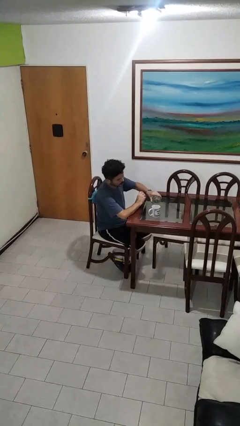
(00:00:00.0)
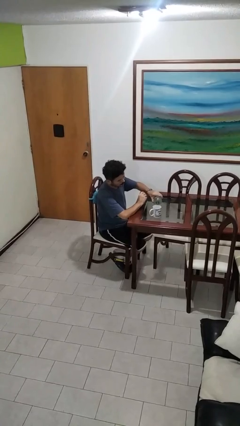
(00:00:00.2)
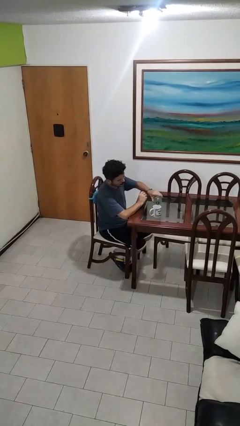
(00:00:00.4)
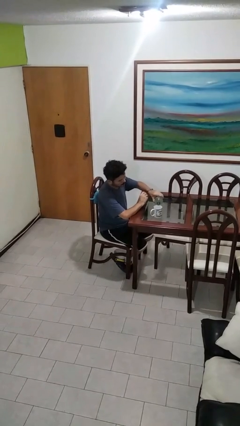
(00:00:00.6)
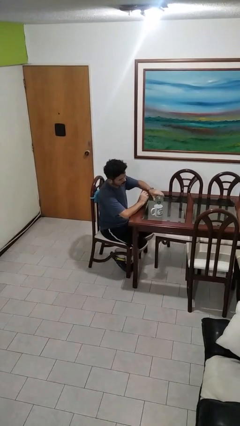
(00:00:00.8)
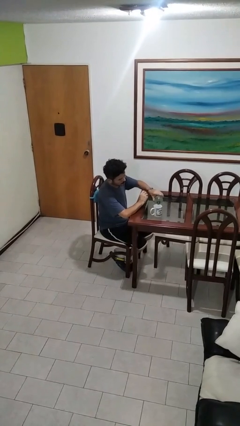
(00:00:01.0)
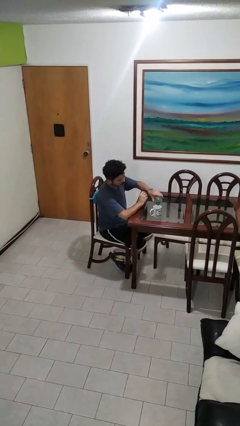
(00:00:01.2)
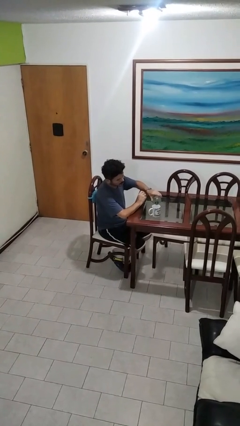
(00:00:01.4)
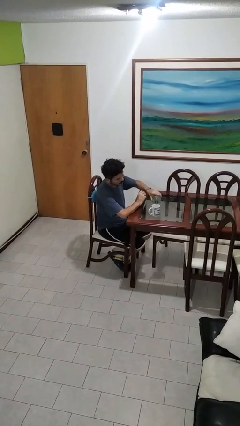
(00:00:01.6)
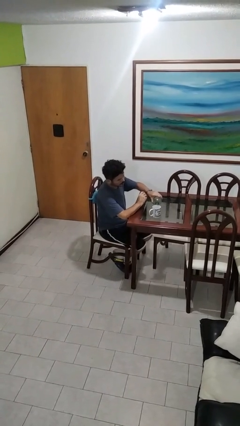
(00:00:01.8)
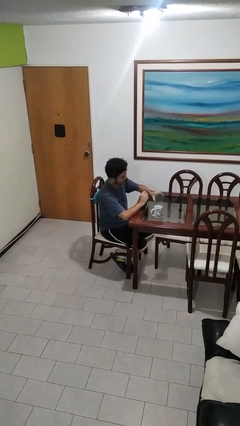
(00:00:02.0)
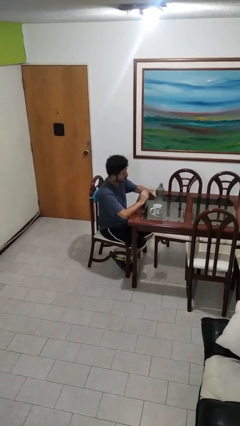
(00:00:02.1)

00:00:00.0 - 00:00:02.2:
person pours liquid into cup

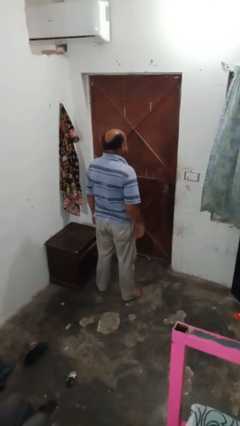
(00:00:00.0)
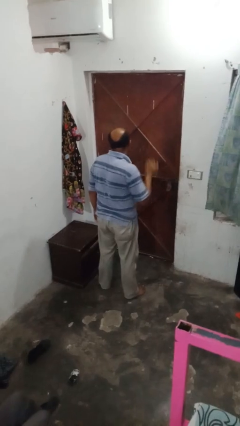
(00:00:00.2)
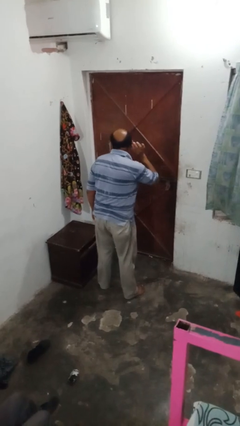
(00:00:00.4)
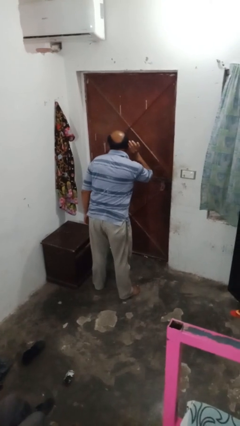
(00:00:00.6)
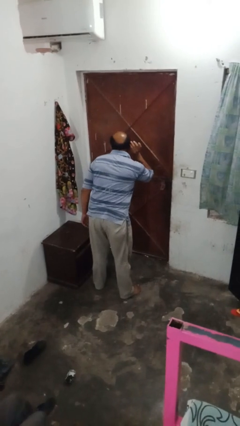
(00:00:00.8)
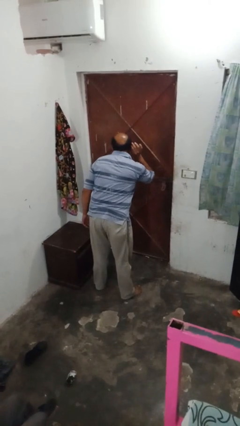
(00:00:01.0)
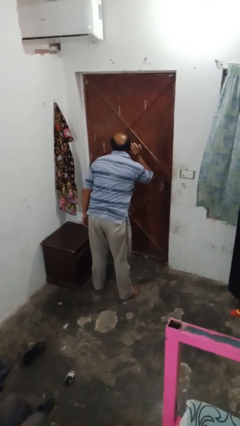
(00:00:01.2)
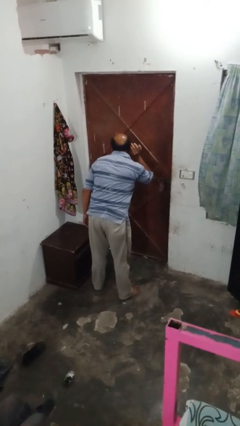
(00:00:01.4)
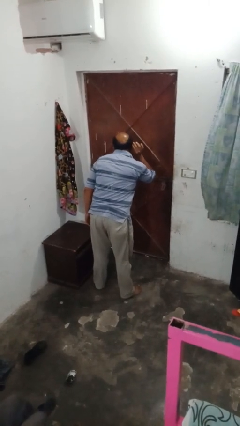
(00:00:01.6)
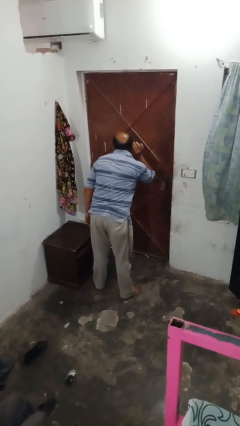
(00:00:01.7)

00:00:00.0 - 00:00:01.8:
person gestures listen closely

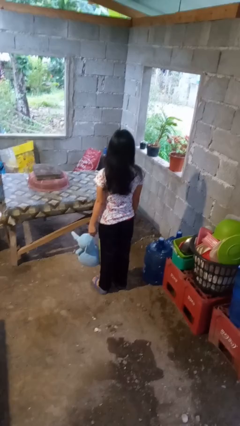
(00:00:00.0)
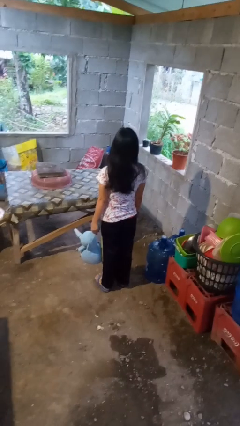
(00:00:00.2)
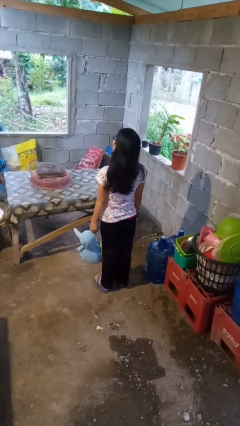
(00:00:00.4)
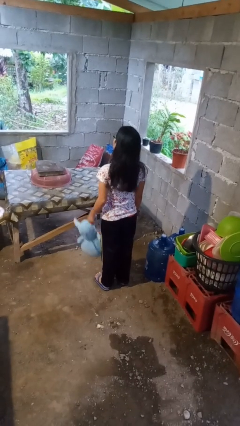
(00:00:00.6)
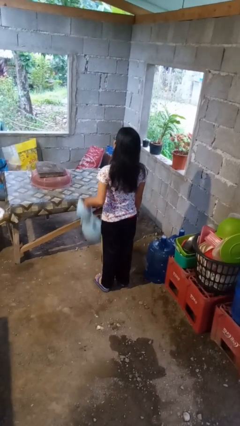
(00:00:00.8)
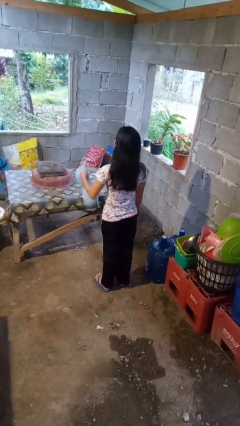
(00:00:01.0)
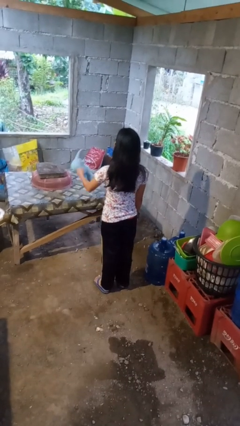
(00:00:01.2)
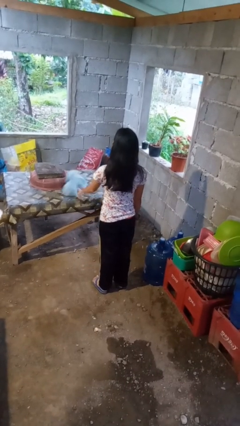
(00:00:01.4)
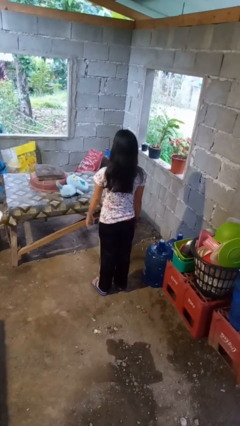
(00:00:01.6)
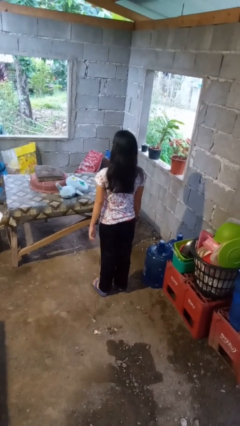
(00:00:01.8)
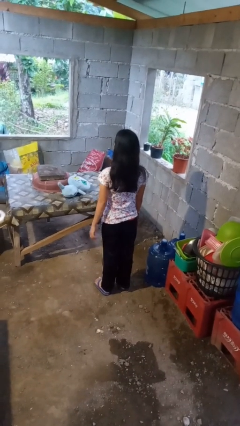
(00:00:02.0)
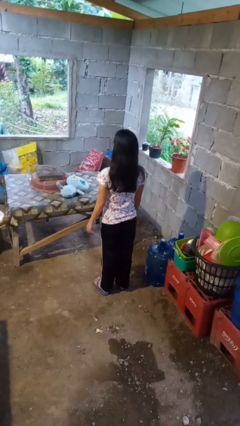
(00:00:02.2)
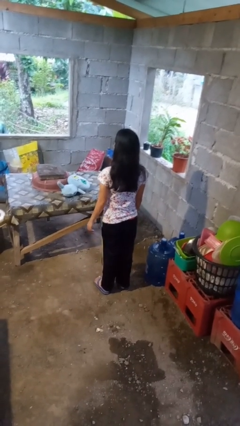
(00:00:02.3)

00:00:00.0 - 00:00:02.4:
person throws object on table

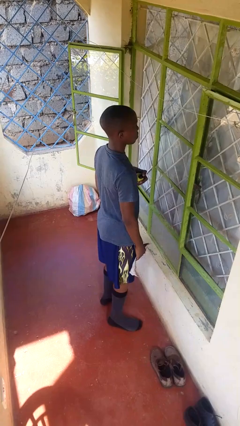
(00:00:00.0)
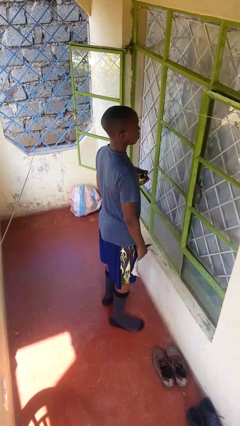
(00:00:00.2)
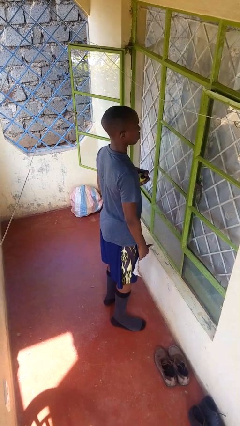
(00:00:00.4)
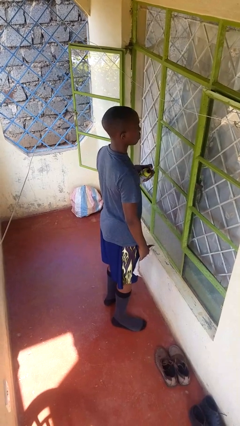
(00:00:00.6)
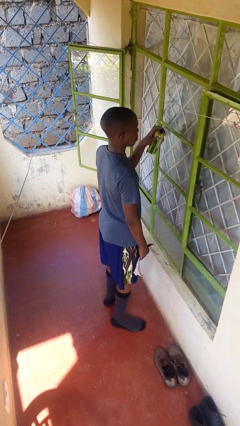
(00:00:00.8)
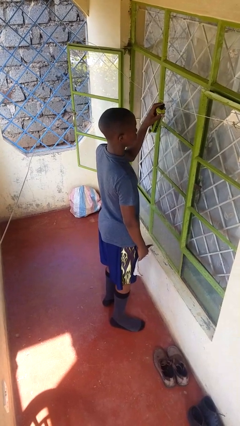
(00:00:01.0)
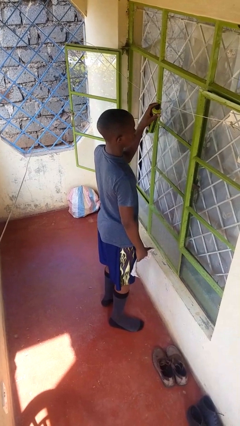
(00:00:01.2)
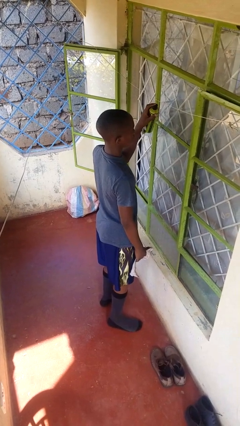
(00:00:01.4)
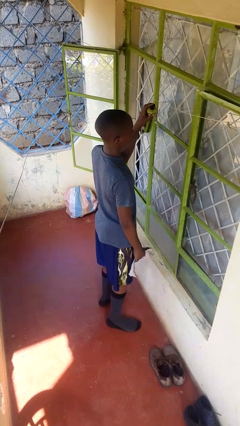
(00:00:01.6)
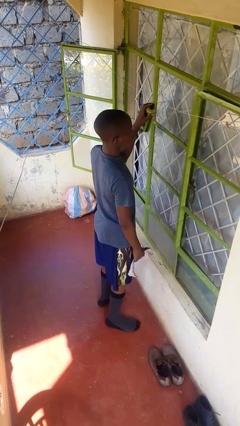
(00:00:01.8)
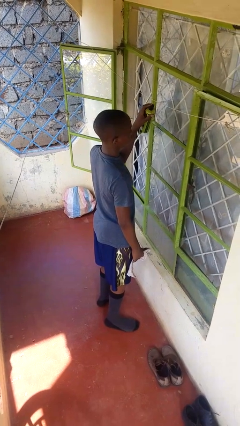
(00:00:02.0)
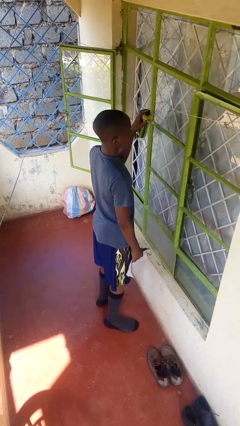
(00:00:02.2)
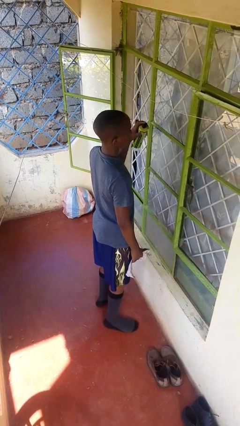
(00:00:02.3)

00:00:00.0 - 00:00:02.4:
person sprays from bottle

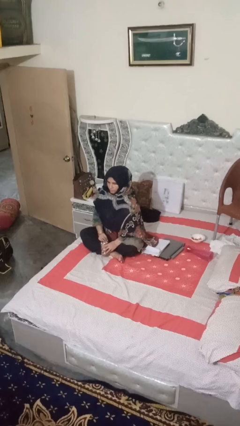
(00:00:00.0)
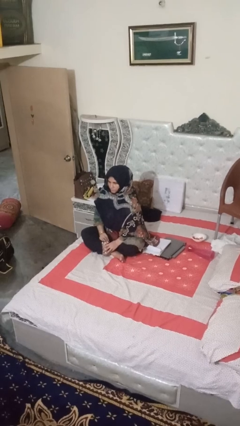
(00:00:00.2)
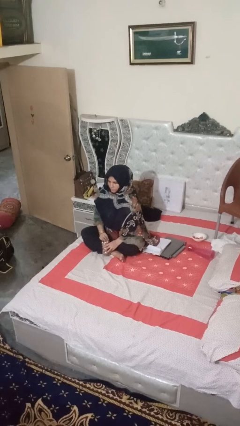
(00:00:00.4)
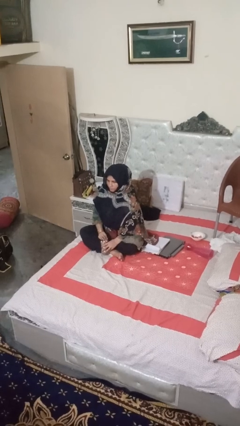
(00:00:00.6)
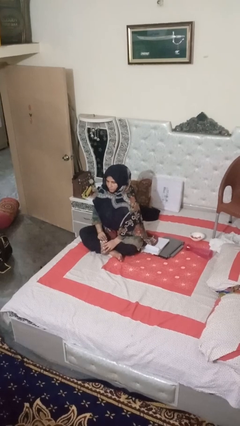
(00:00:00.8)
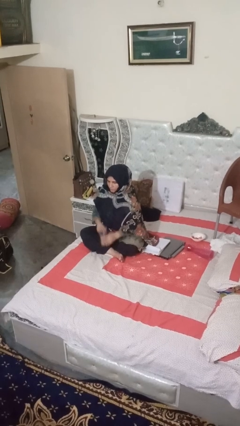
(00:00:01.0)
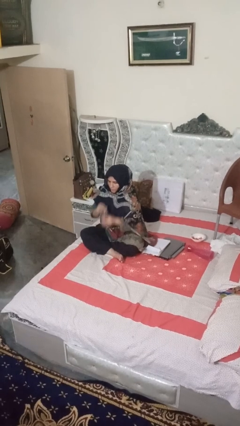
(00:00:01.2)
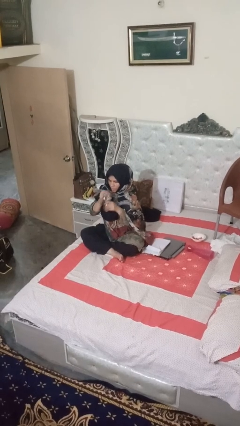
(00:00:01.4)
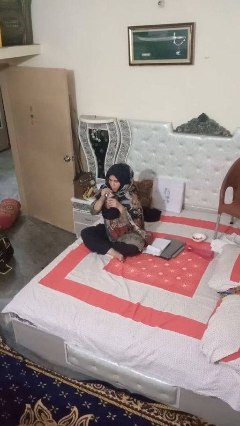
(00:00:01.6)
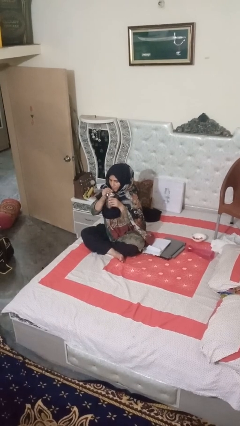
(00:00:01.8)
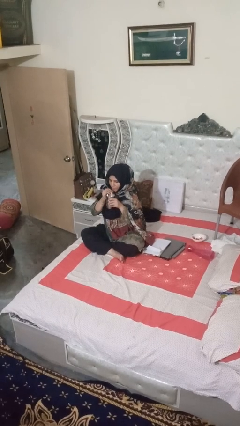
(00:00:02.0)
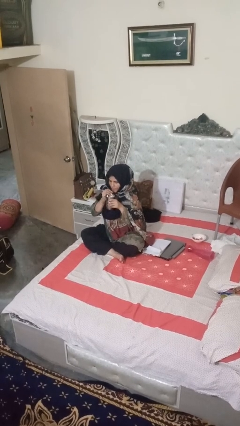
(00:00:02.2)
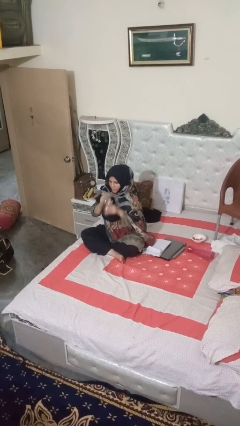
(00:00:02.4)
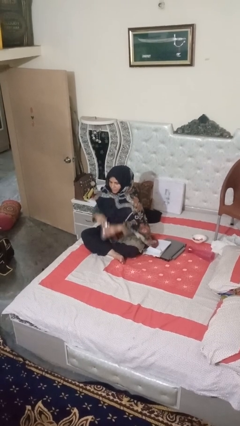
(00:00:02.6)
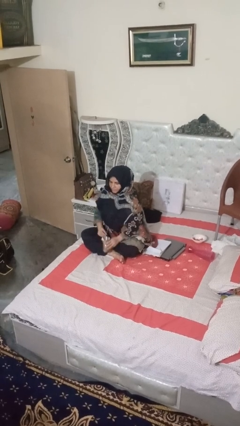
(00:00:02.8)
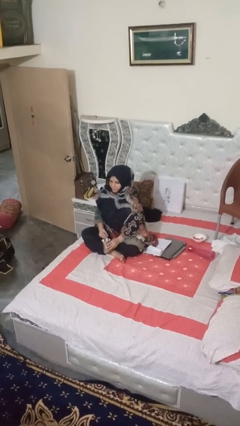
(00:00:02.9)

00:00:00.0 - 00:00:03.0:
person drinks from straw

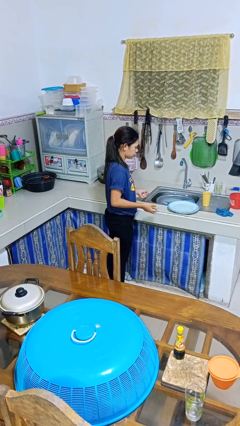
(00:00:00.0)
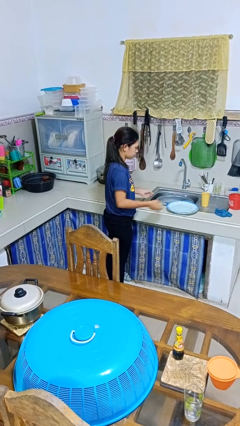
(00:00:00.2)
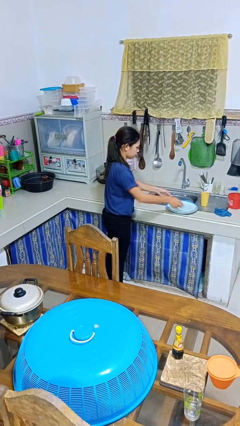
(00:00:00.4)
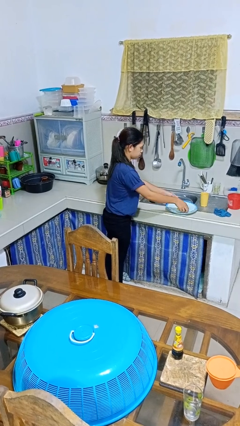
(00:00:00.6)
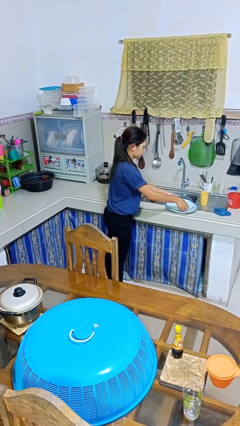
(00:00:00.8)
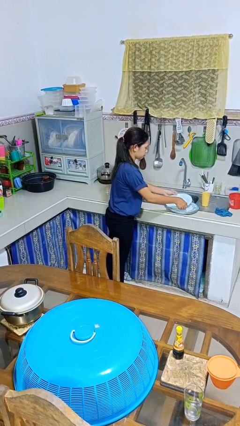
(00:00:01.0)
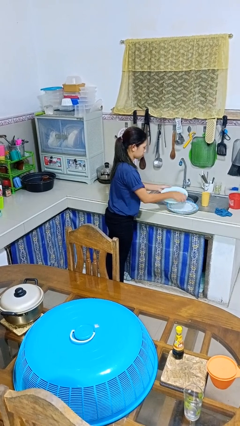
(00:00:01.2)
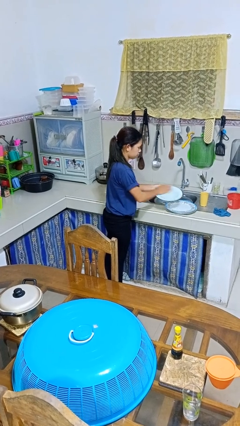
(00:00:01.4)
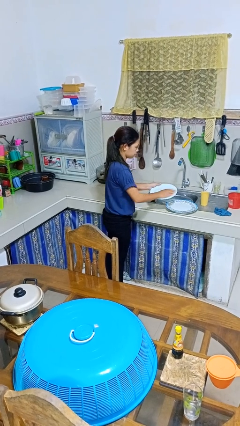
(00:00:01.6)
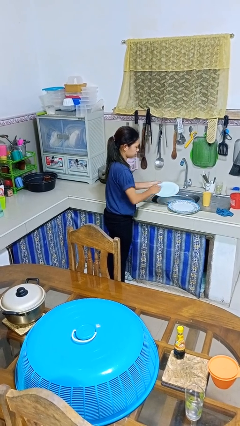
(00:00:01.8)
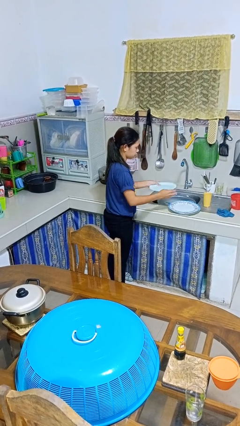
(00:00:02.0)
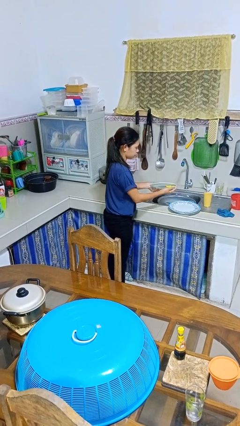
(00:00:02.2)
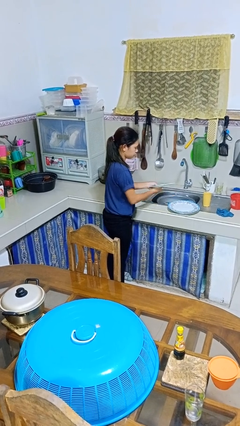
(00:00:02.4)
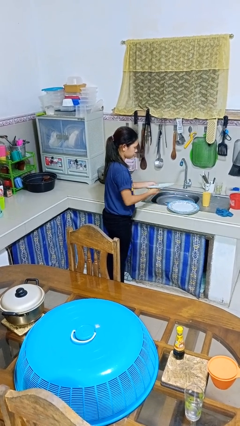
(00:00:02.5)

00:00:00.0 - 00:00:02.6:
person washes dish

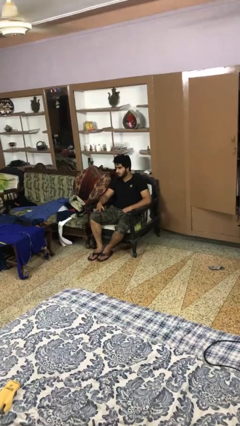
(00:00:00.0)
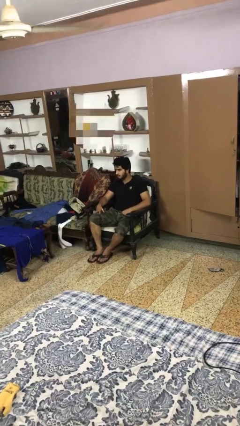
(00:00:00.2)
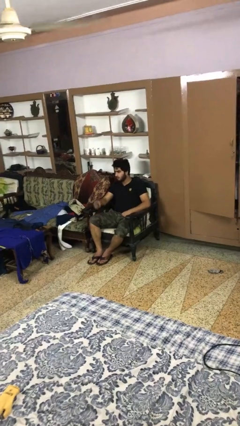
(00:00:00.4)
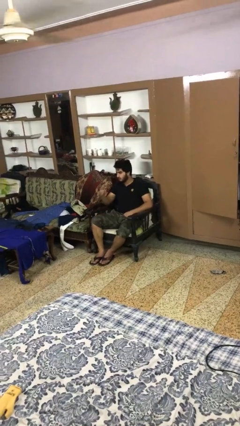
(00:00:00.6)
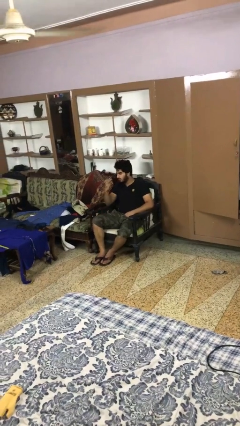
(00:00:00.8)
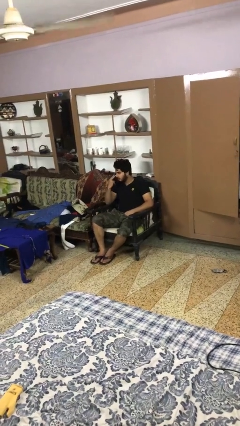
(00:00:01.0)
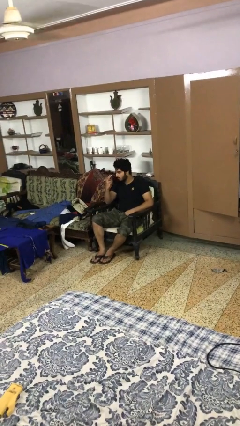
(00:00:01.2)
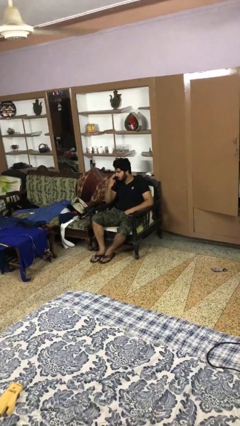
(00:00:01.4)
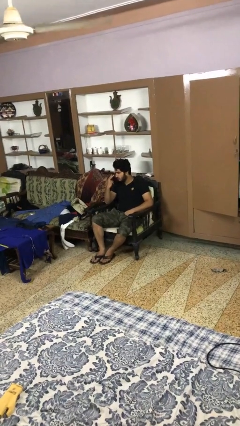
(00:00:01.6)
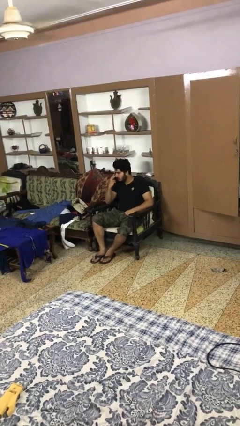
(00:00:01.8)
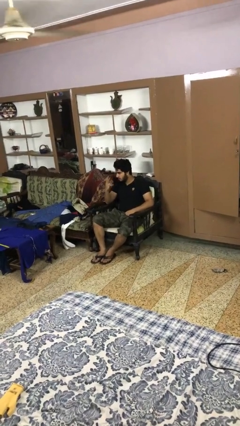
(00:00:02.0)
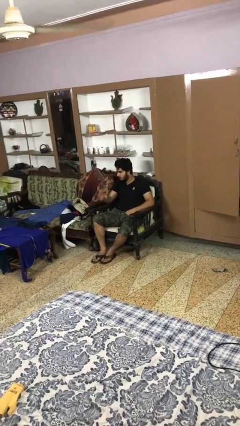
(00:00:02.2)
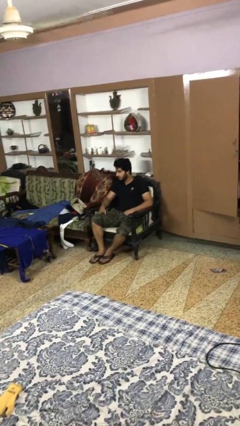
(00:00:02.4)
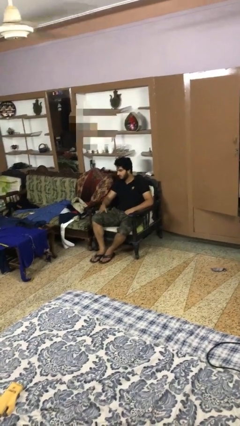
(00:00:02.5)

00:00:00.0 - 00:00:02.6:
person gestures watch closely
